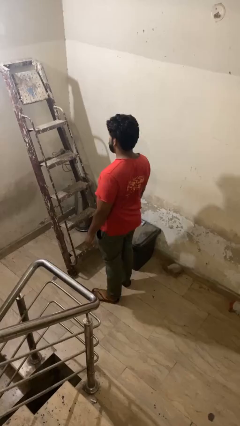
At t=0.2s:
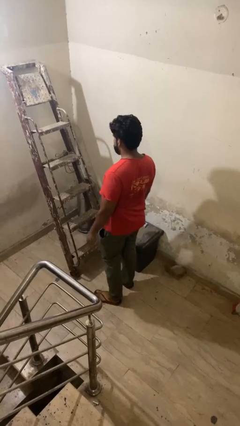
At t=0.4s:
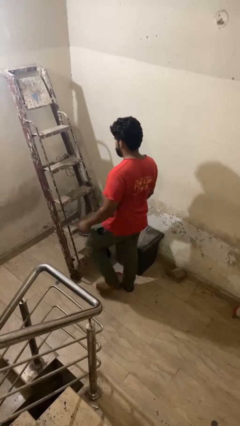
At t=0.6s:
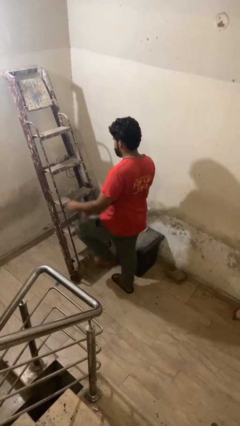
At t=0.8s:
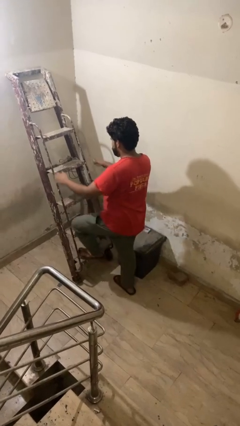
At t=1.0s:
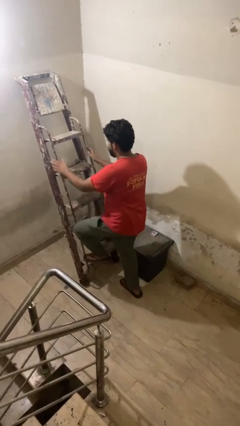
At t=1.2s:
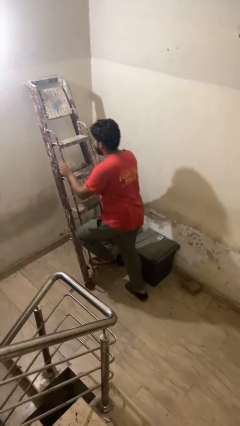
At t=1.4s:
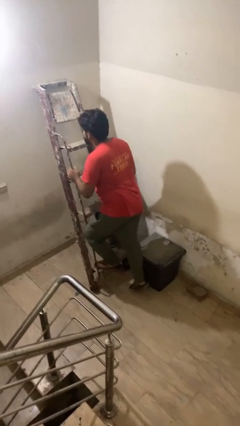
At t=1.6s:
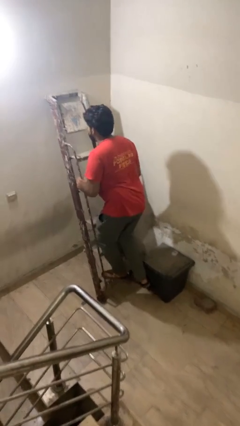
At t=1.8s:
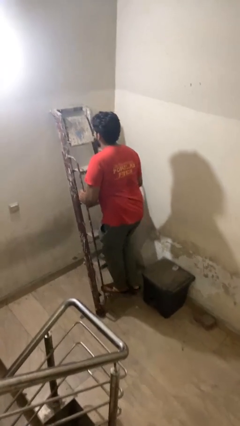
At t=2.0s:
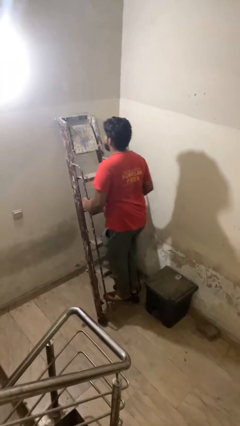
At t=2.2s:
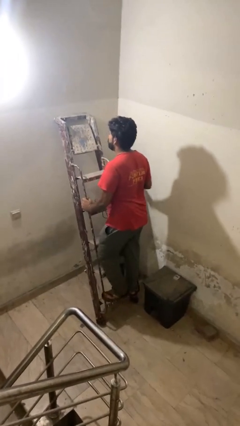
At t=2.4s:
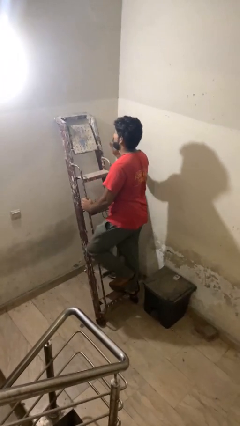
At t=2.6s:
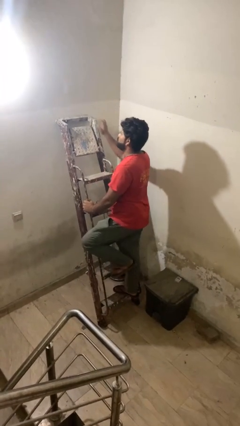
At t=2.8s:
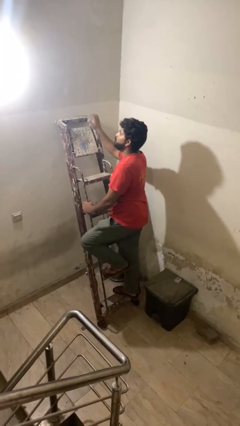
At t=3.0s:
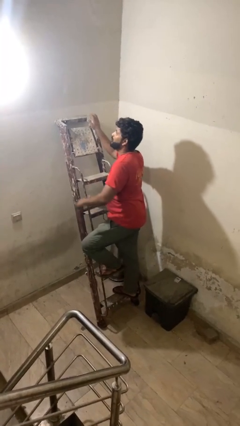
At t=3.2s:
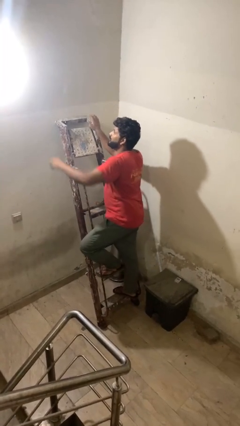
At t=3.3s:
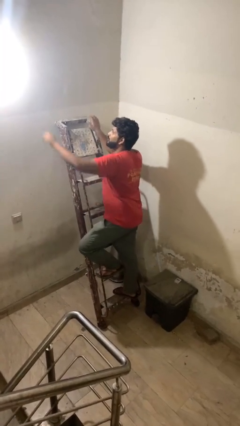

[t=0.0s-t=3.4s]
person climbs up ladder

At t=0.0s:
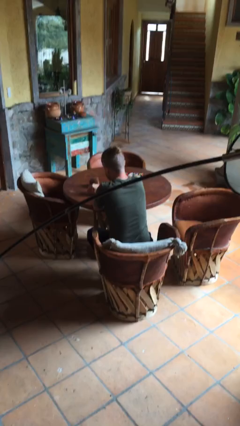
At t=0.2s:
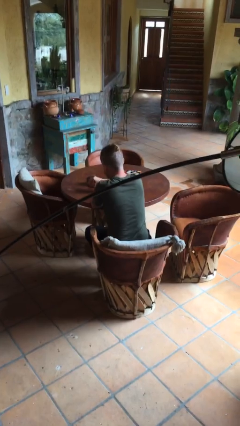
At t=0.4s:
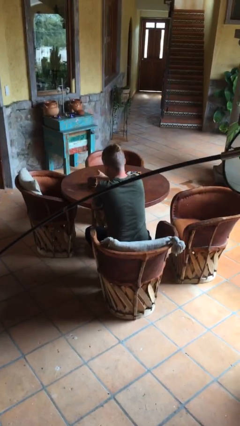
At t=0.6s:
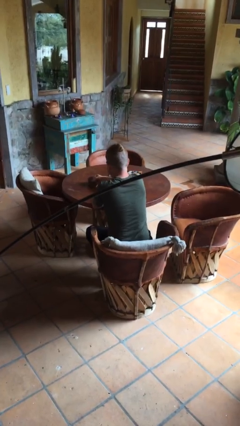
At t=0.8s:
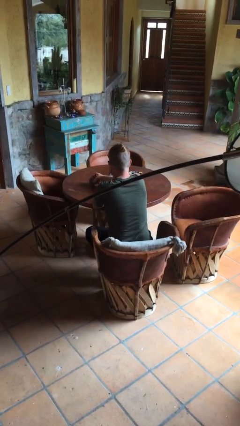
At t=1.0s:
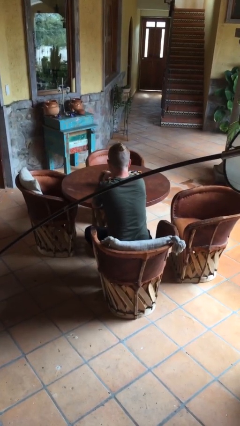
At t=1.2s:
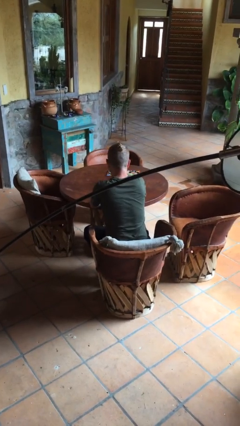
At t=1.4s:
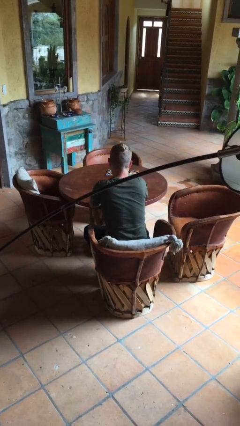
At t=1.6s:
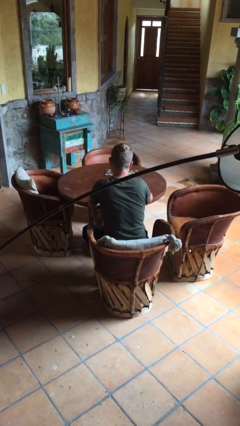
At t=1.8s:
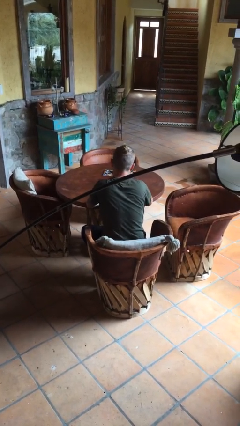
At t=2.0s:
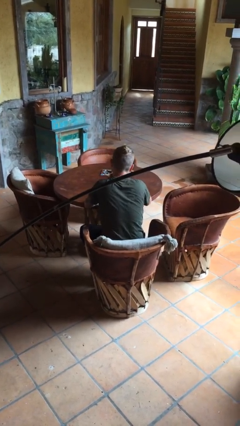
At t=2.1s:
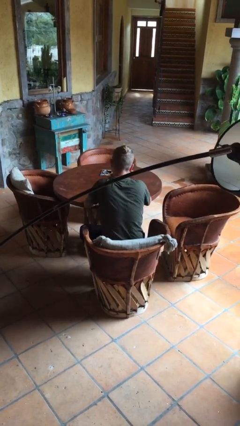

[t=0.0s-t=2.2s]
person sets upright glass

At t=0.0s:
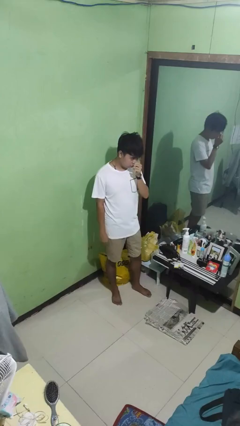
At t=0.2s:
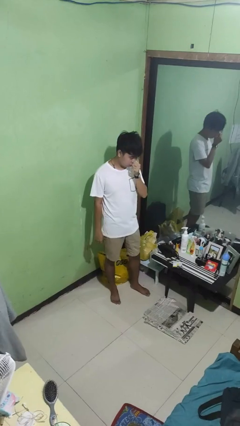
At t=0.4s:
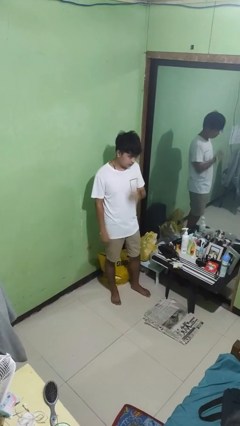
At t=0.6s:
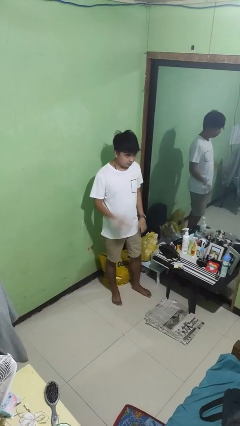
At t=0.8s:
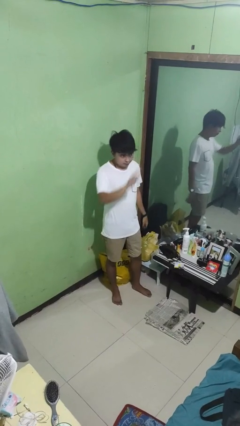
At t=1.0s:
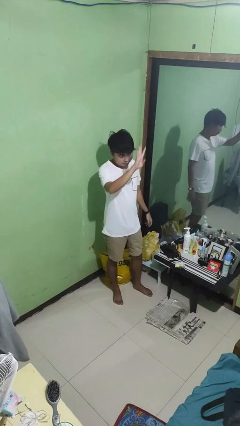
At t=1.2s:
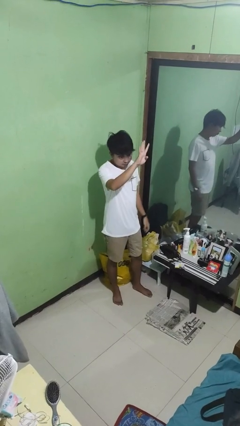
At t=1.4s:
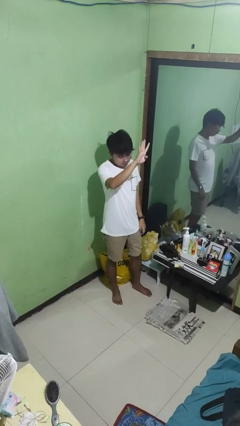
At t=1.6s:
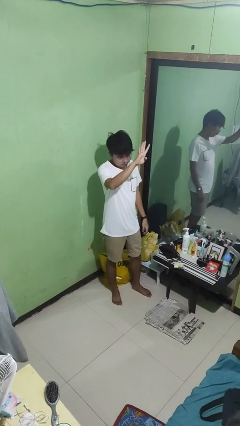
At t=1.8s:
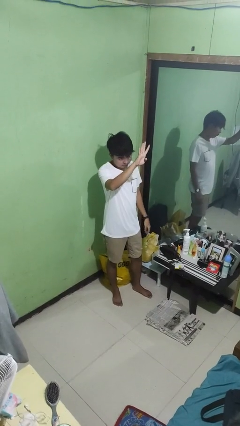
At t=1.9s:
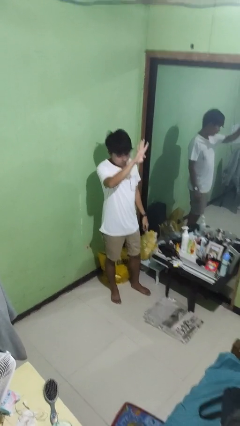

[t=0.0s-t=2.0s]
person gestures number four

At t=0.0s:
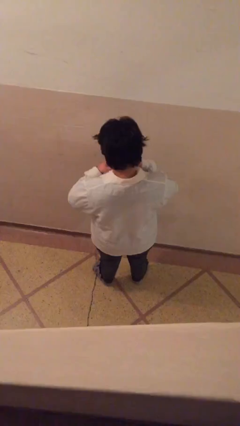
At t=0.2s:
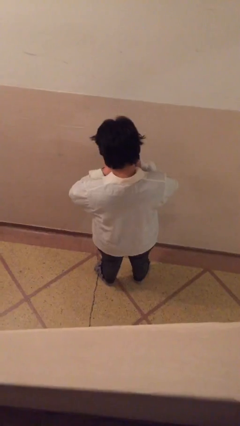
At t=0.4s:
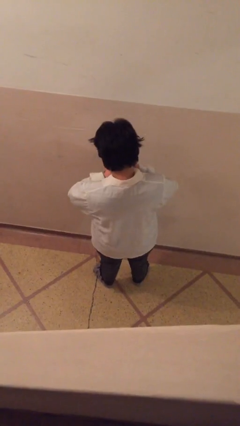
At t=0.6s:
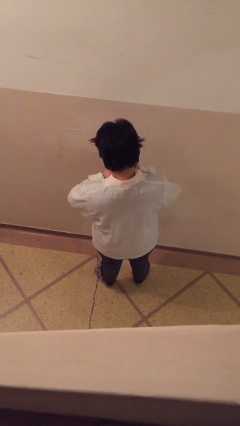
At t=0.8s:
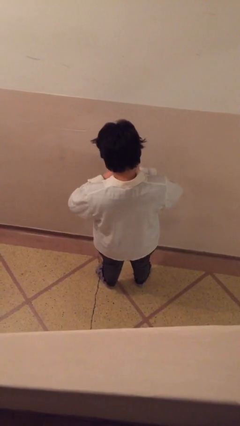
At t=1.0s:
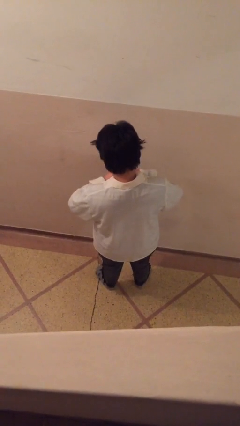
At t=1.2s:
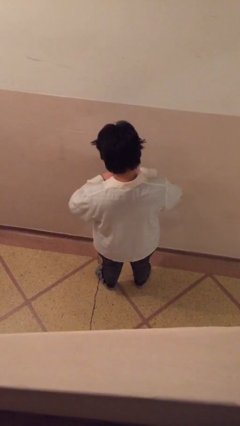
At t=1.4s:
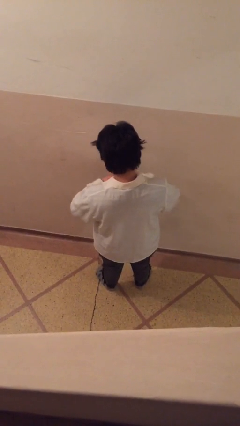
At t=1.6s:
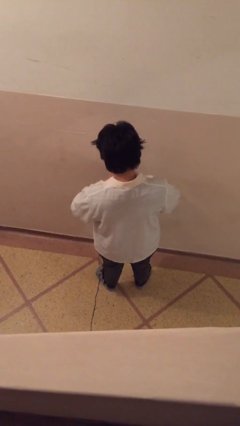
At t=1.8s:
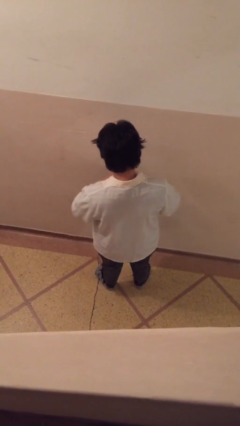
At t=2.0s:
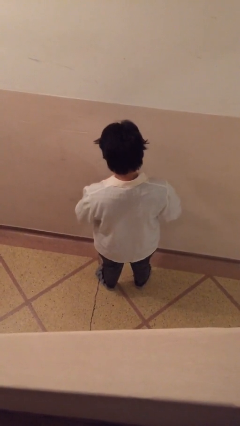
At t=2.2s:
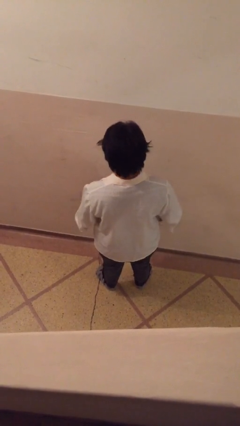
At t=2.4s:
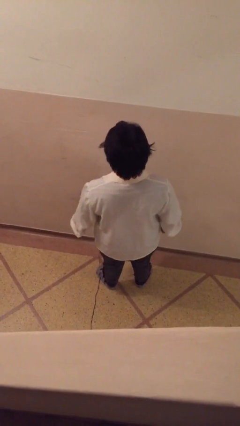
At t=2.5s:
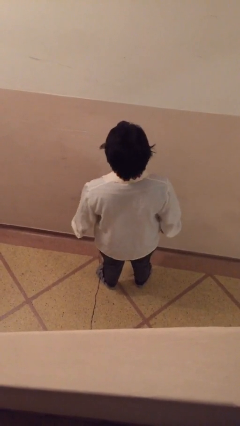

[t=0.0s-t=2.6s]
person unbuttons shirt

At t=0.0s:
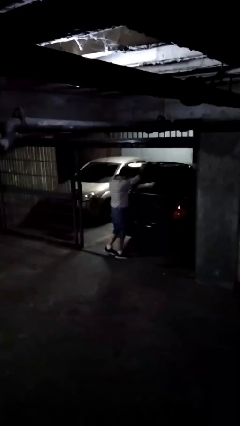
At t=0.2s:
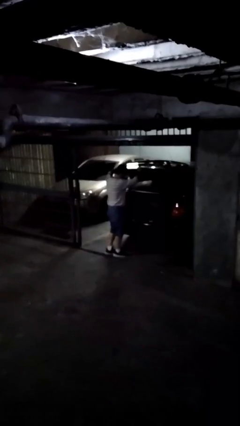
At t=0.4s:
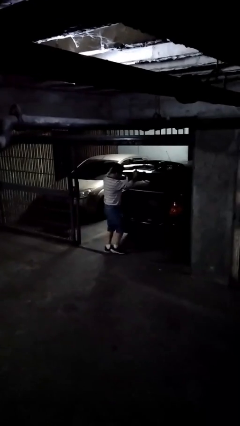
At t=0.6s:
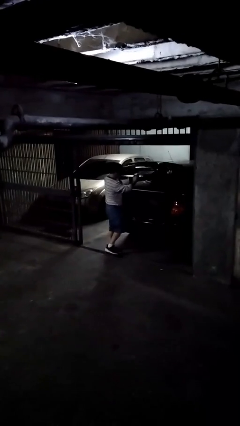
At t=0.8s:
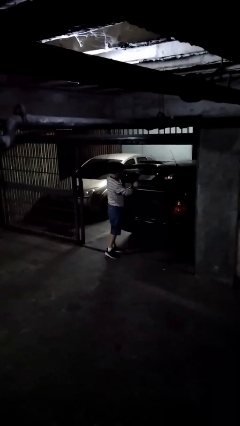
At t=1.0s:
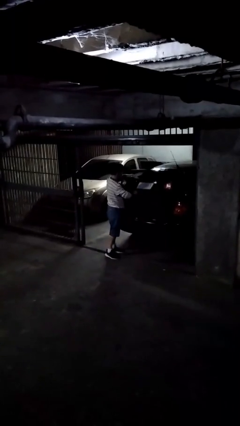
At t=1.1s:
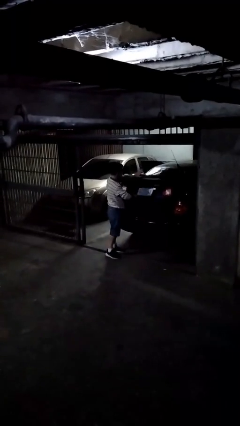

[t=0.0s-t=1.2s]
person closes car trunk

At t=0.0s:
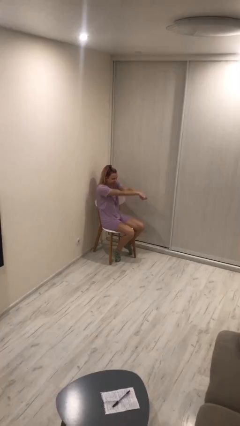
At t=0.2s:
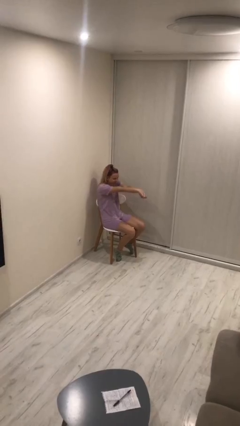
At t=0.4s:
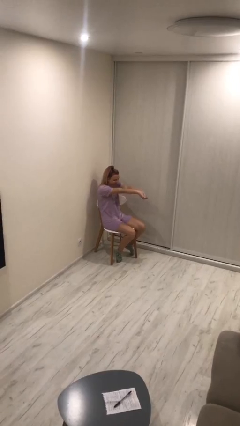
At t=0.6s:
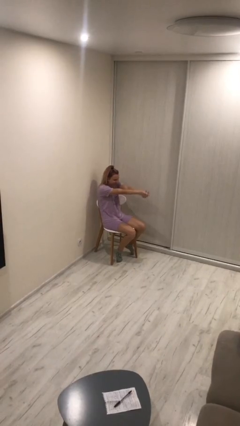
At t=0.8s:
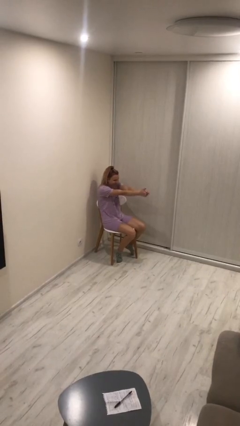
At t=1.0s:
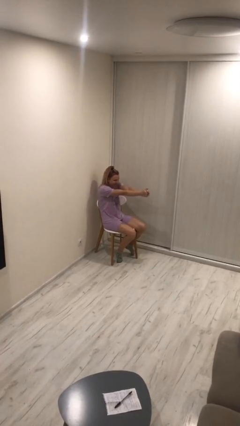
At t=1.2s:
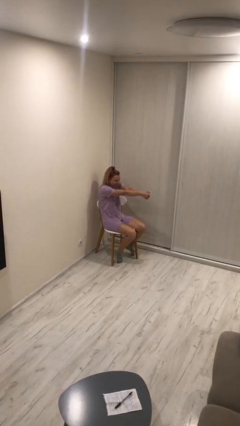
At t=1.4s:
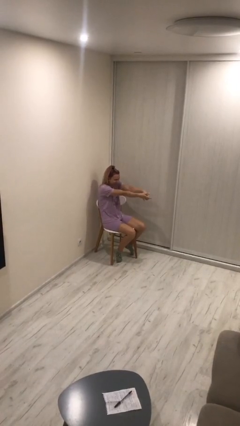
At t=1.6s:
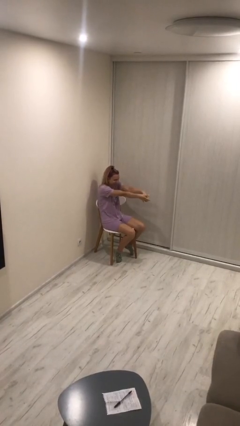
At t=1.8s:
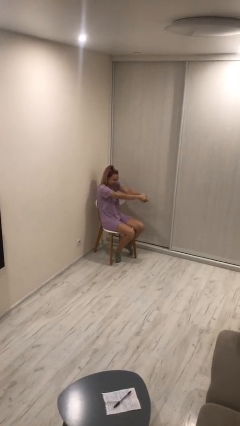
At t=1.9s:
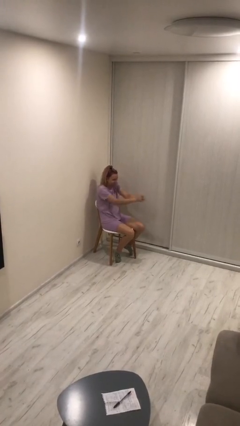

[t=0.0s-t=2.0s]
person cracks knuckles

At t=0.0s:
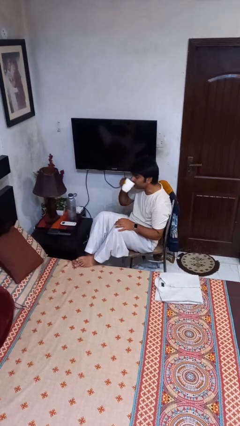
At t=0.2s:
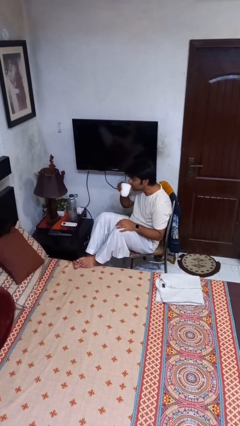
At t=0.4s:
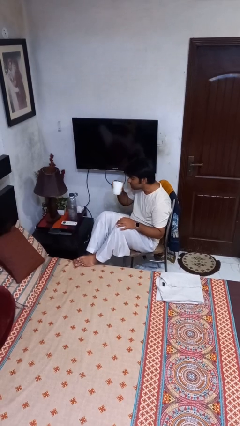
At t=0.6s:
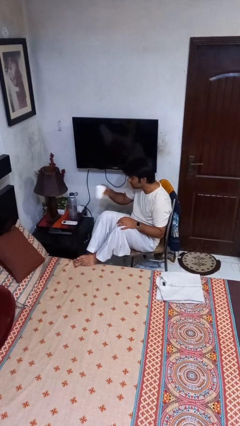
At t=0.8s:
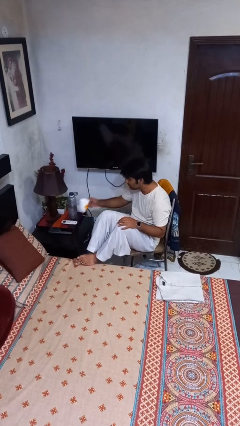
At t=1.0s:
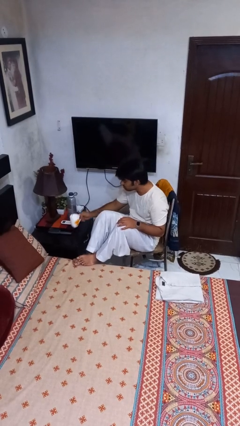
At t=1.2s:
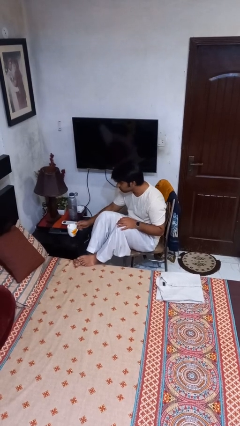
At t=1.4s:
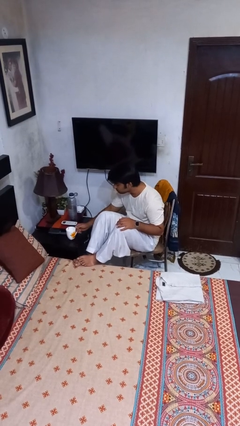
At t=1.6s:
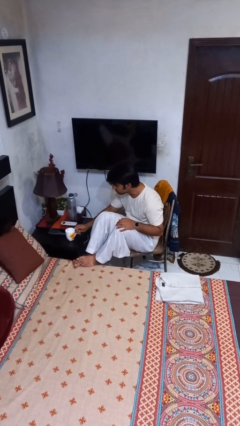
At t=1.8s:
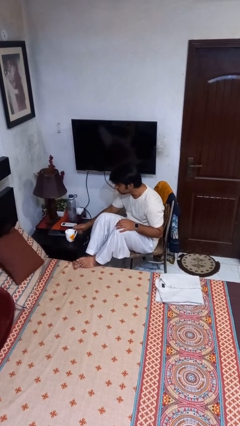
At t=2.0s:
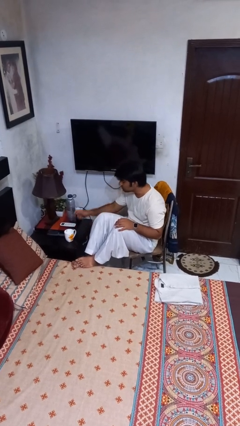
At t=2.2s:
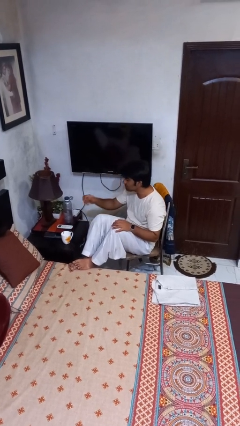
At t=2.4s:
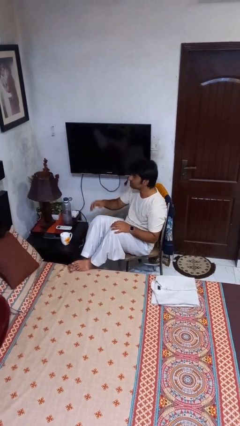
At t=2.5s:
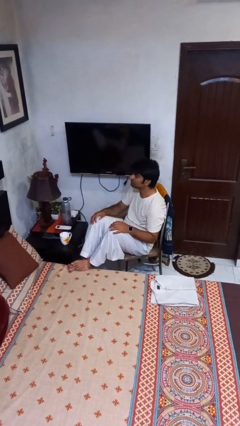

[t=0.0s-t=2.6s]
person puts down object on table

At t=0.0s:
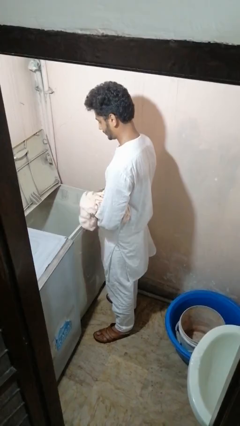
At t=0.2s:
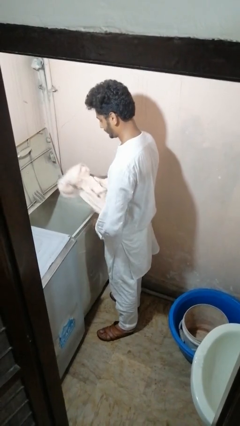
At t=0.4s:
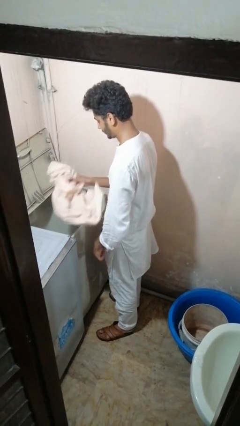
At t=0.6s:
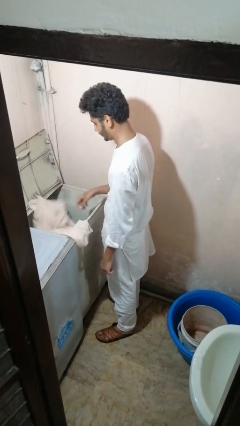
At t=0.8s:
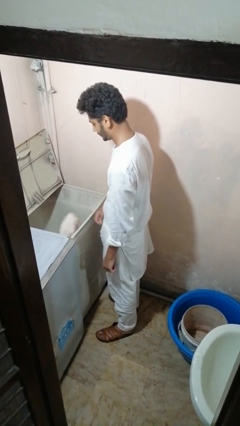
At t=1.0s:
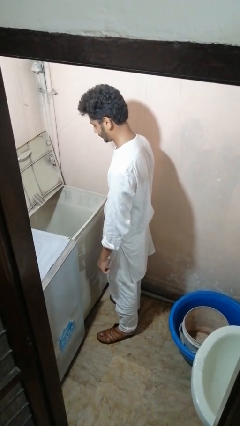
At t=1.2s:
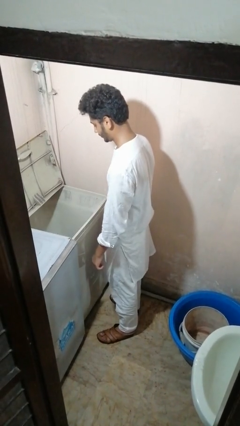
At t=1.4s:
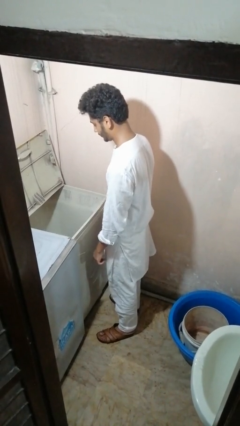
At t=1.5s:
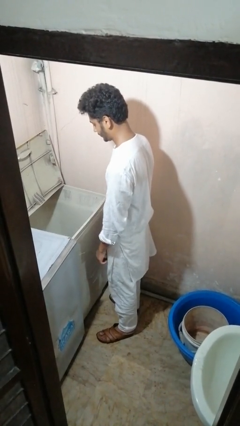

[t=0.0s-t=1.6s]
person loads clotheswasher
